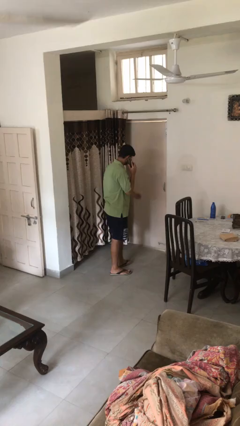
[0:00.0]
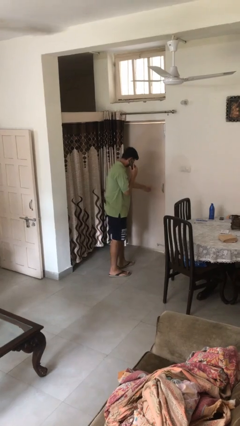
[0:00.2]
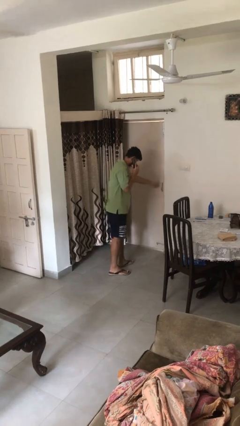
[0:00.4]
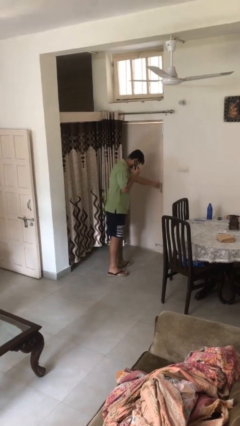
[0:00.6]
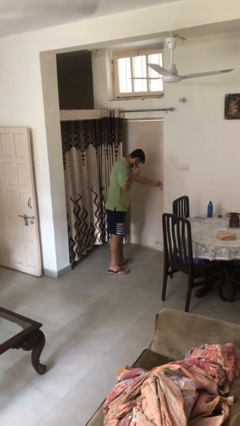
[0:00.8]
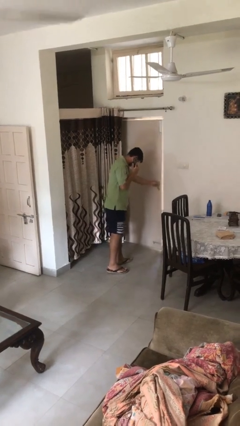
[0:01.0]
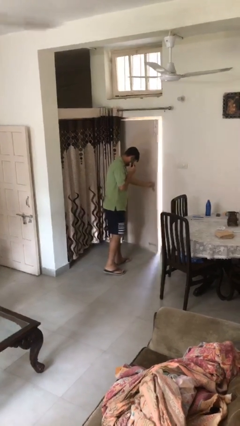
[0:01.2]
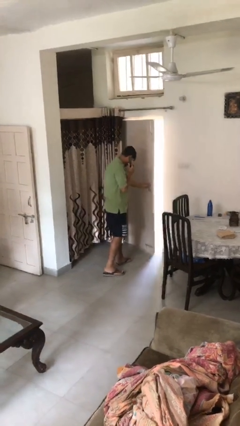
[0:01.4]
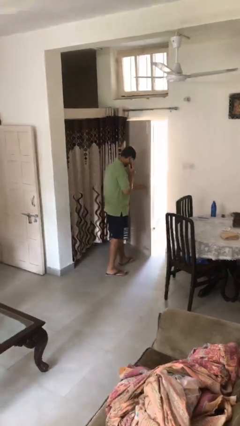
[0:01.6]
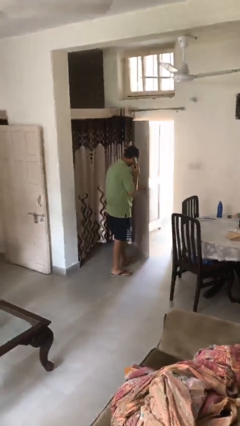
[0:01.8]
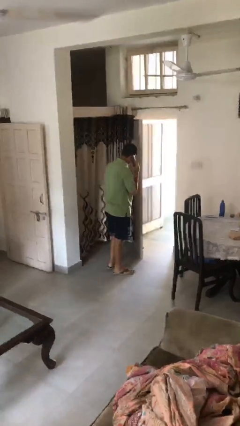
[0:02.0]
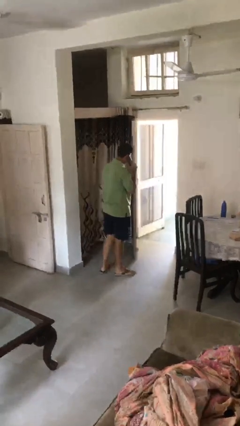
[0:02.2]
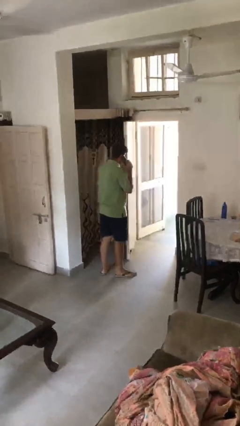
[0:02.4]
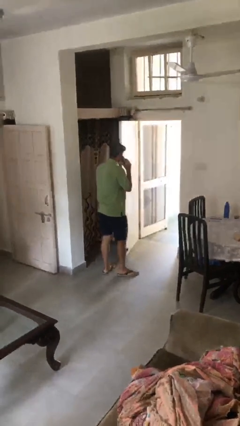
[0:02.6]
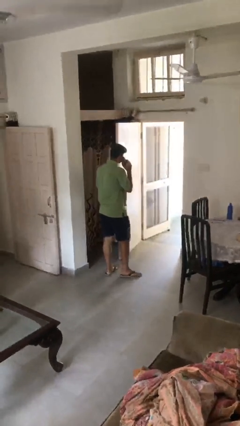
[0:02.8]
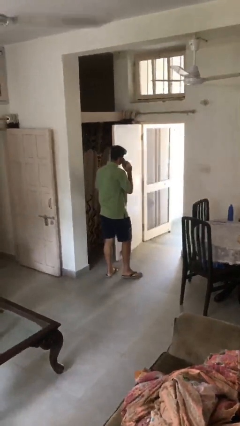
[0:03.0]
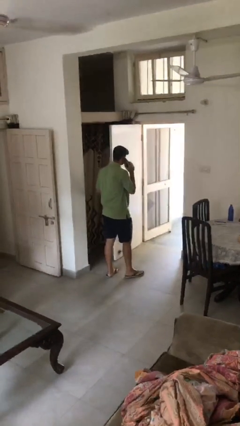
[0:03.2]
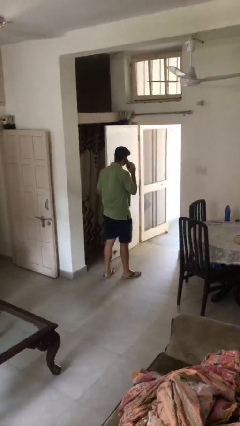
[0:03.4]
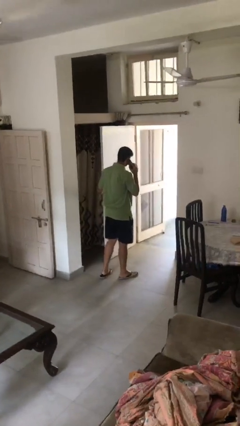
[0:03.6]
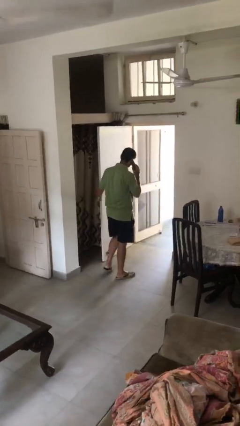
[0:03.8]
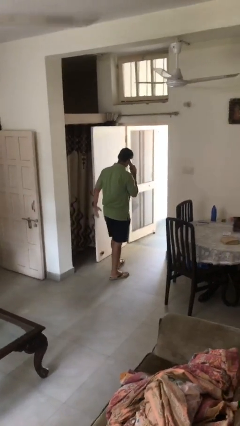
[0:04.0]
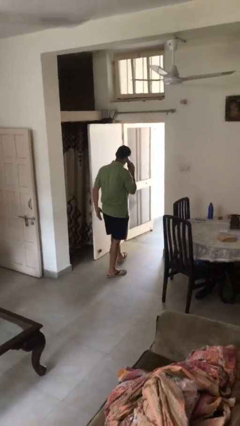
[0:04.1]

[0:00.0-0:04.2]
person opens facility door

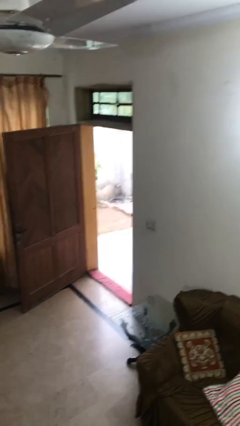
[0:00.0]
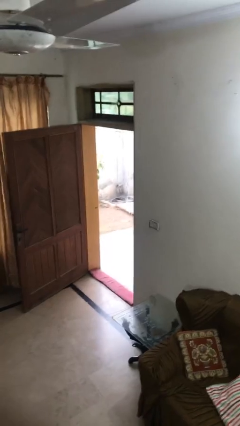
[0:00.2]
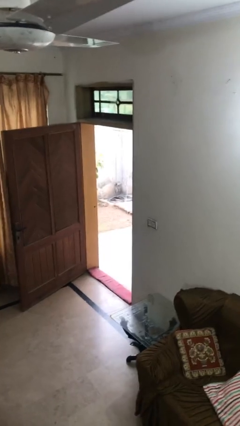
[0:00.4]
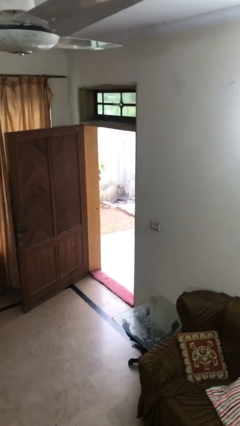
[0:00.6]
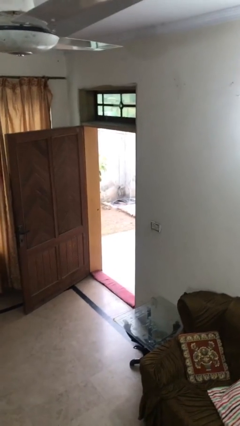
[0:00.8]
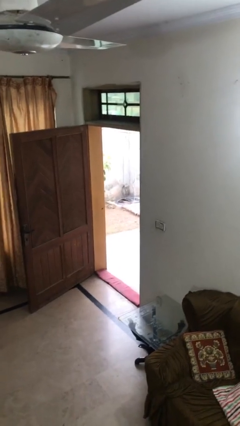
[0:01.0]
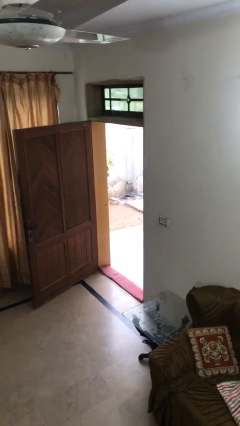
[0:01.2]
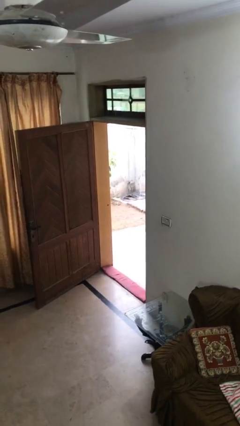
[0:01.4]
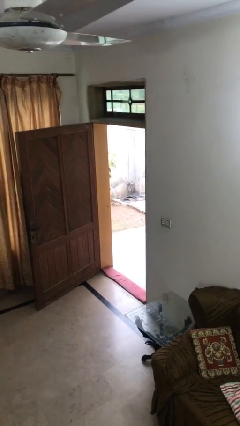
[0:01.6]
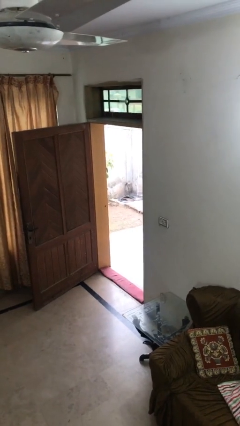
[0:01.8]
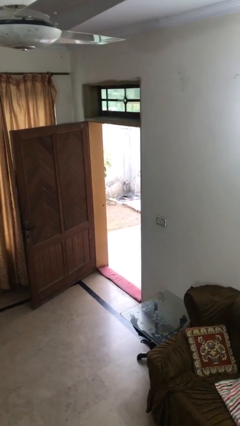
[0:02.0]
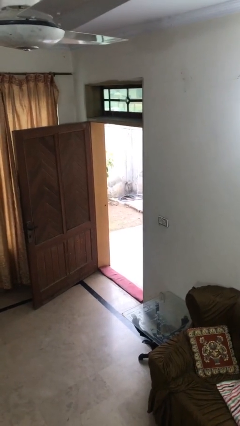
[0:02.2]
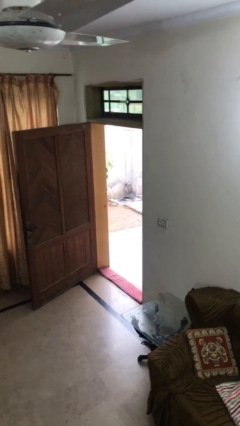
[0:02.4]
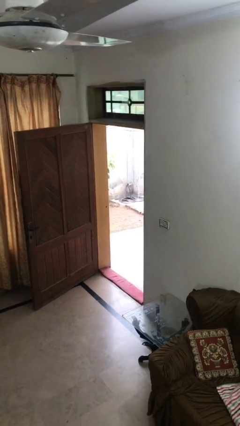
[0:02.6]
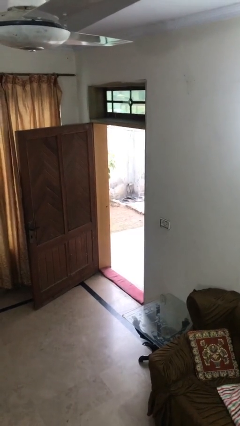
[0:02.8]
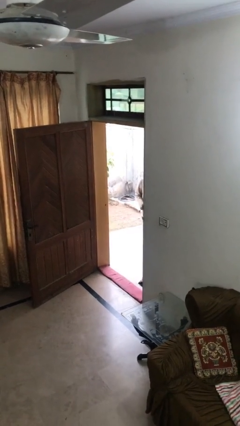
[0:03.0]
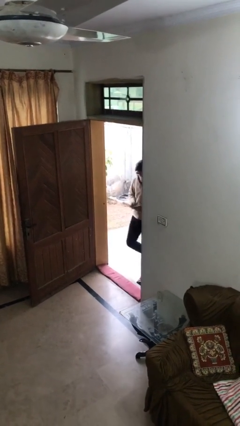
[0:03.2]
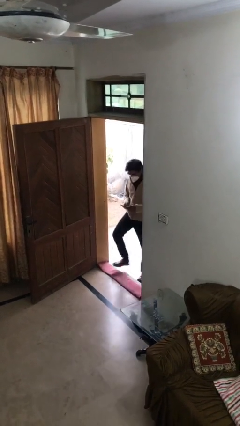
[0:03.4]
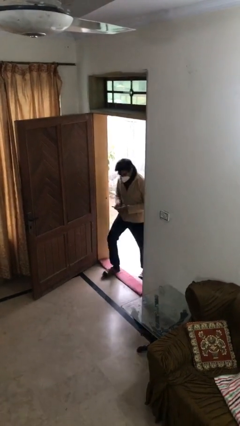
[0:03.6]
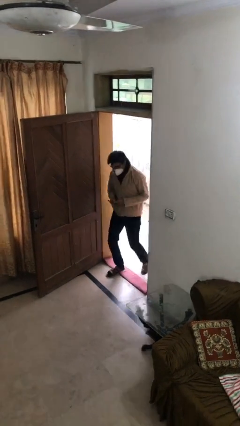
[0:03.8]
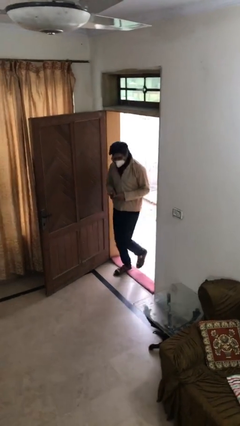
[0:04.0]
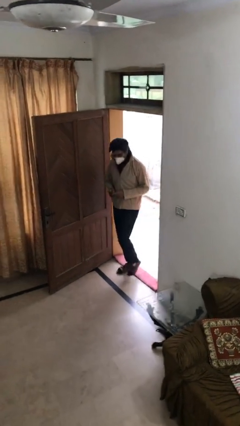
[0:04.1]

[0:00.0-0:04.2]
person enters scene through structure

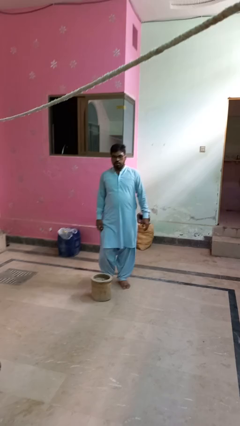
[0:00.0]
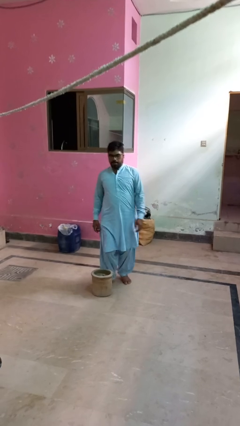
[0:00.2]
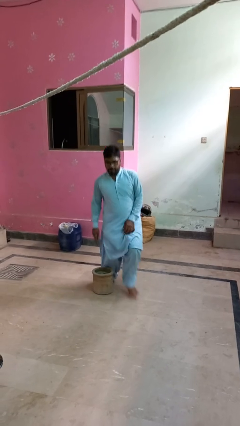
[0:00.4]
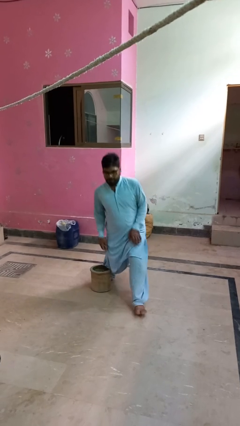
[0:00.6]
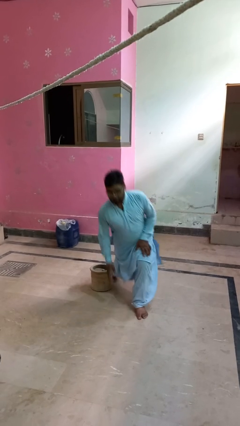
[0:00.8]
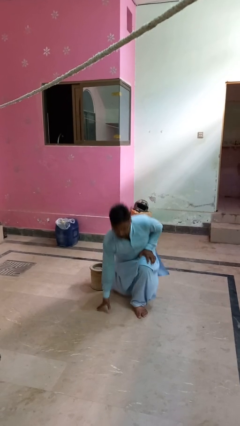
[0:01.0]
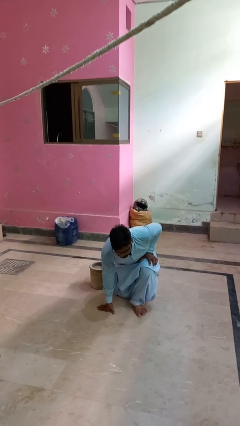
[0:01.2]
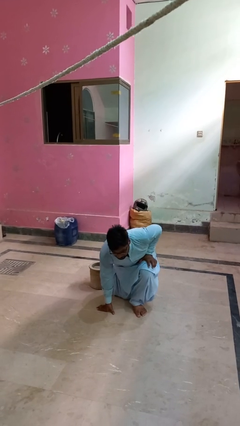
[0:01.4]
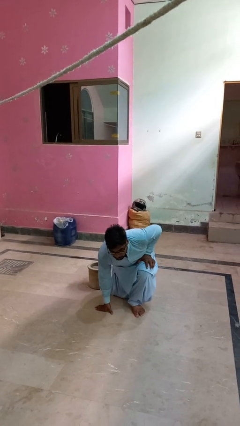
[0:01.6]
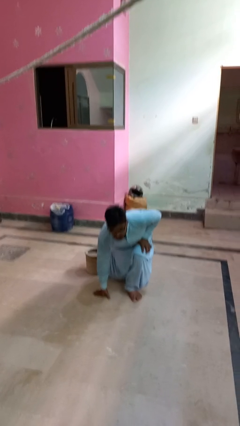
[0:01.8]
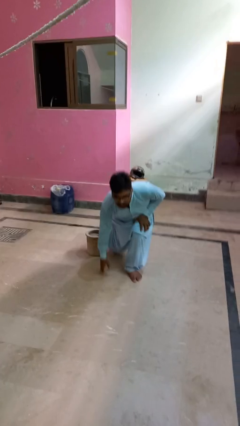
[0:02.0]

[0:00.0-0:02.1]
person trips on object on floor

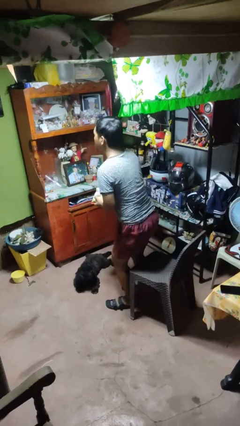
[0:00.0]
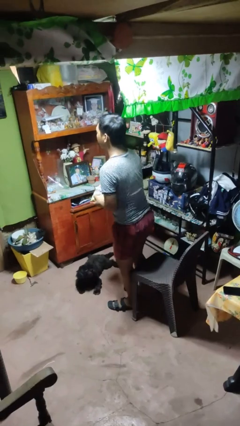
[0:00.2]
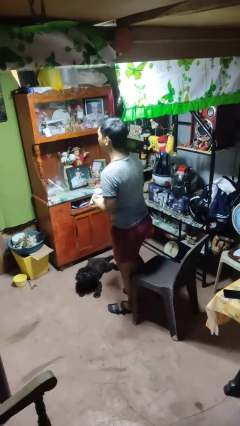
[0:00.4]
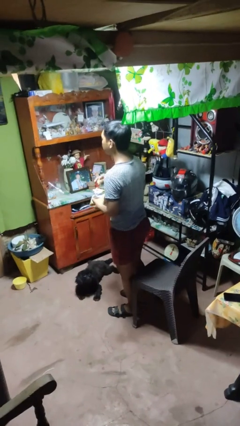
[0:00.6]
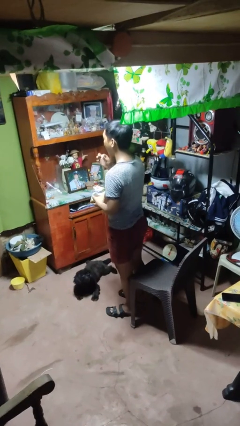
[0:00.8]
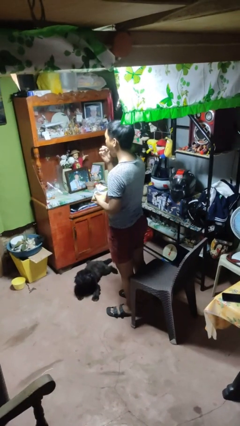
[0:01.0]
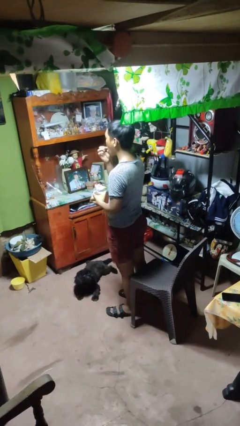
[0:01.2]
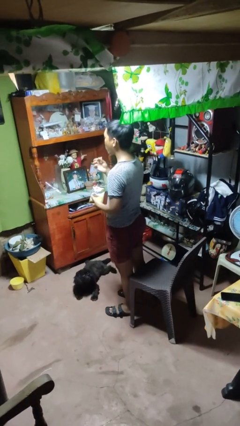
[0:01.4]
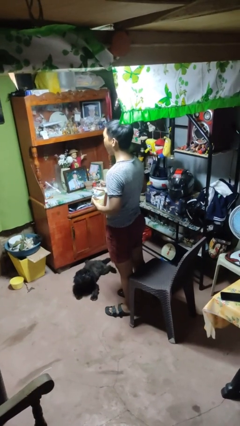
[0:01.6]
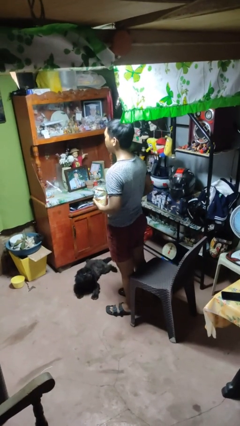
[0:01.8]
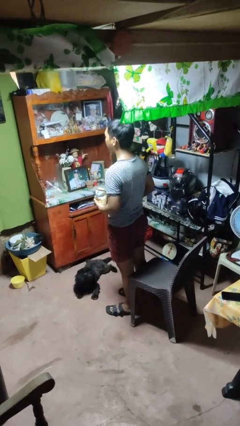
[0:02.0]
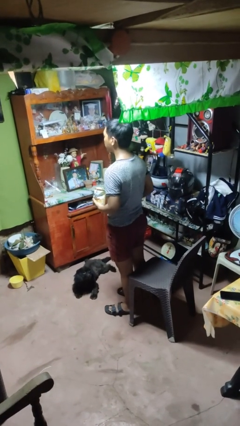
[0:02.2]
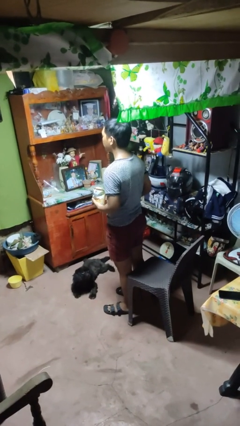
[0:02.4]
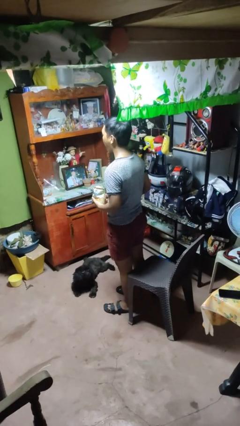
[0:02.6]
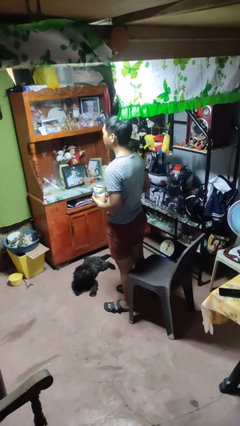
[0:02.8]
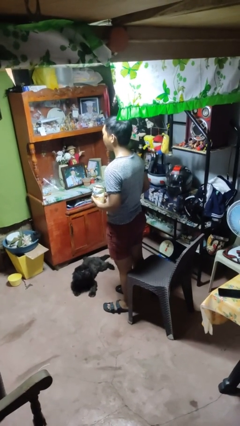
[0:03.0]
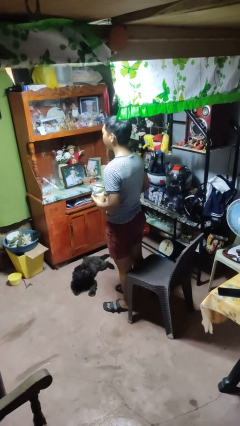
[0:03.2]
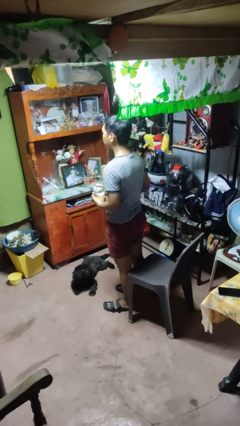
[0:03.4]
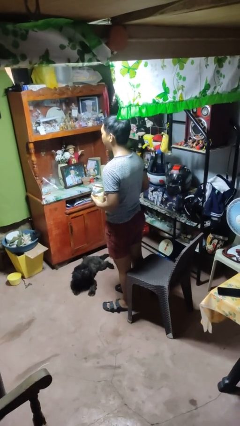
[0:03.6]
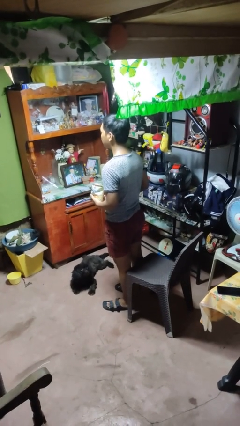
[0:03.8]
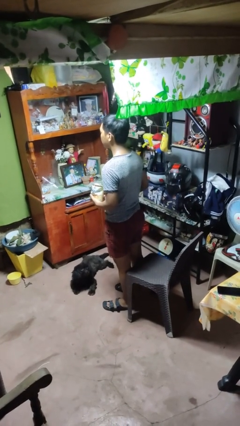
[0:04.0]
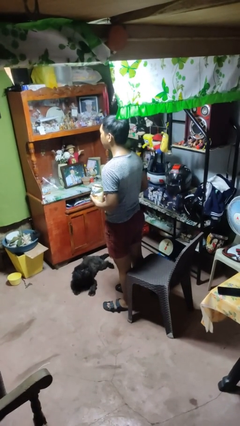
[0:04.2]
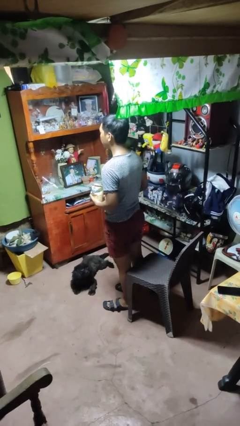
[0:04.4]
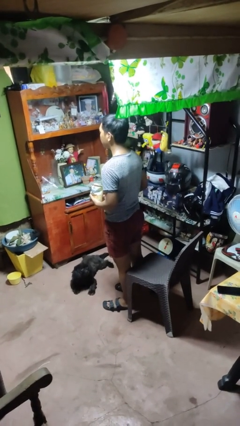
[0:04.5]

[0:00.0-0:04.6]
person eats snack from bag

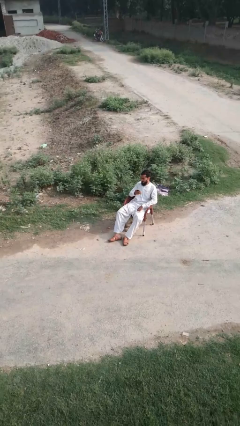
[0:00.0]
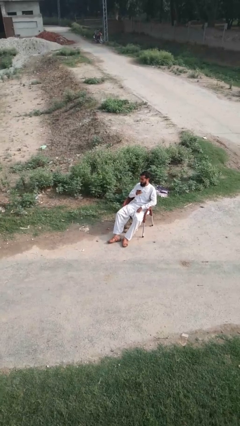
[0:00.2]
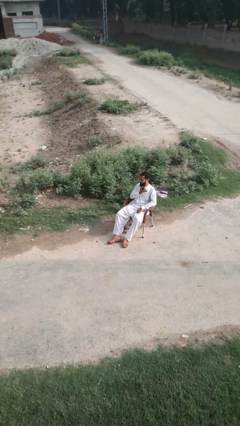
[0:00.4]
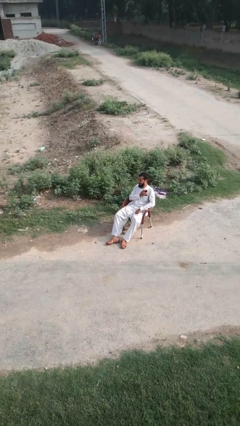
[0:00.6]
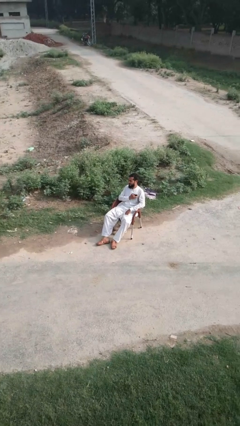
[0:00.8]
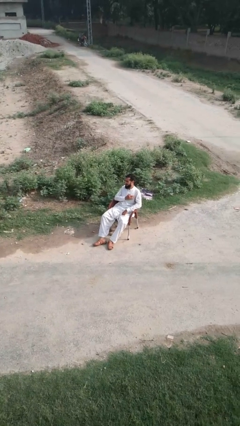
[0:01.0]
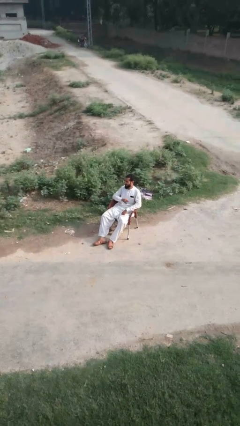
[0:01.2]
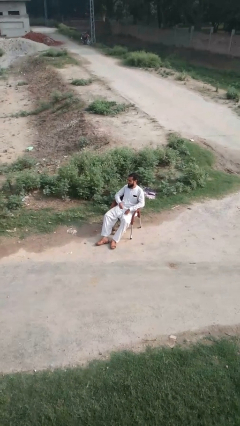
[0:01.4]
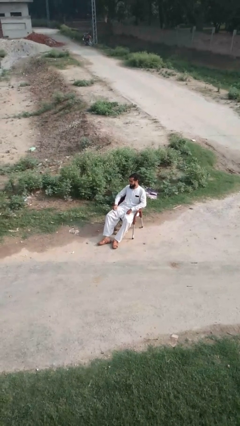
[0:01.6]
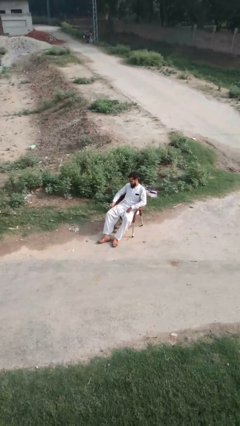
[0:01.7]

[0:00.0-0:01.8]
person puts phone into pocket

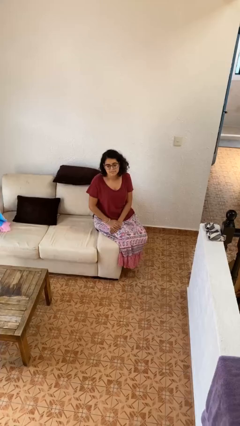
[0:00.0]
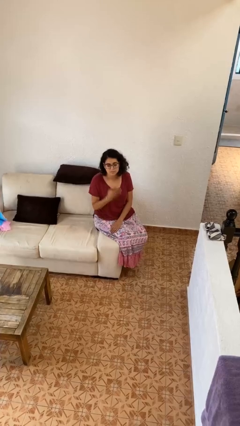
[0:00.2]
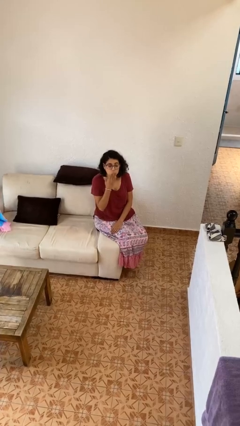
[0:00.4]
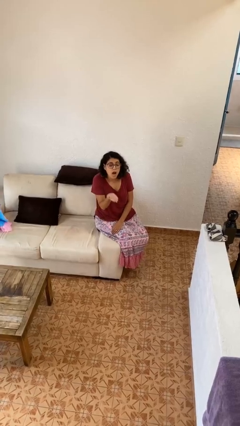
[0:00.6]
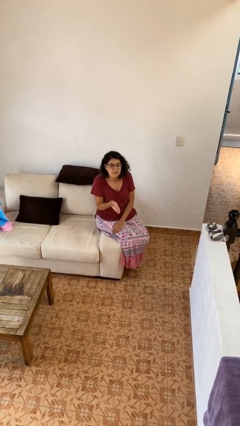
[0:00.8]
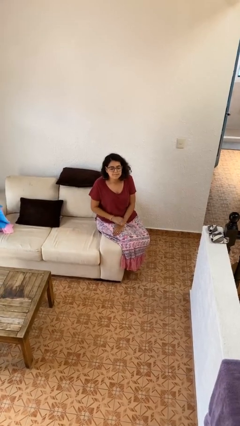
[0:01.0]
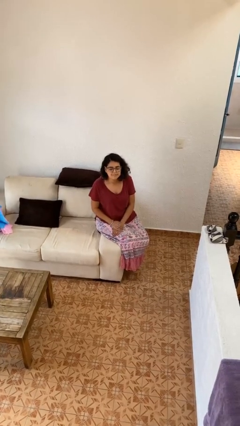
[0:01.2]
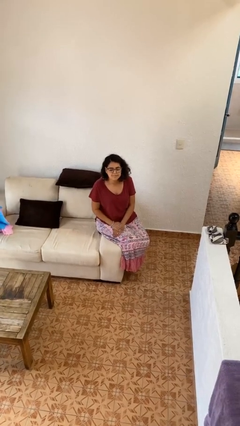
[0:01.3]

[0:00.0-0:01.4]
person gestures blow kiss
